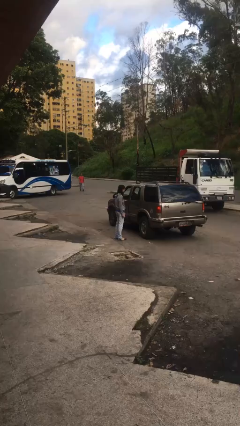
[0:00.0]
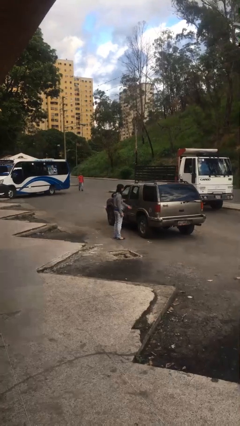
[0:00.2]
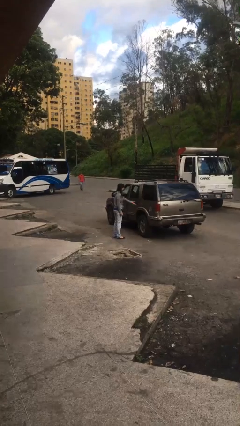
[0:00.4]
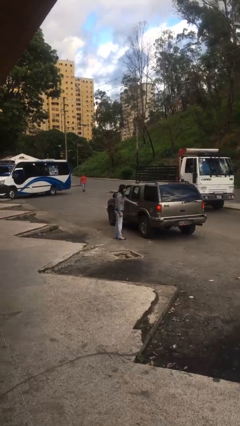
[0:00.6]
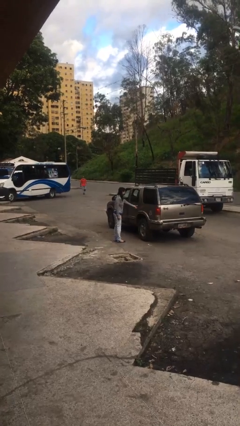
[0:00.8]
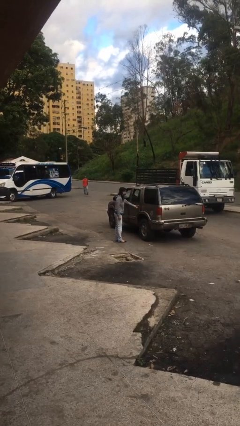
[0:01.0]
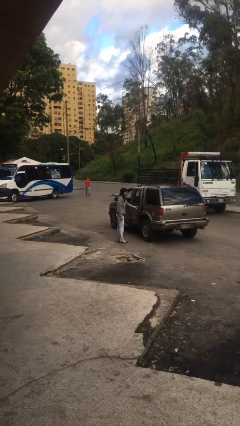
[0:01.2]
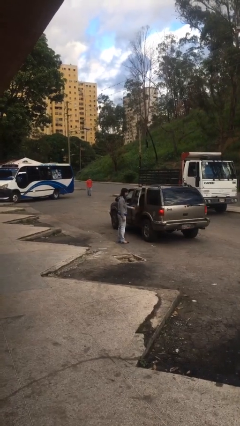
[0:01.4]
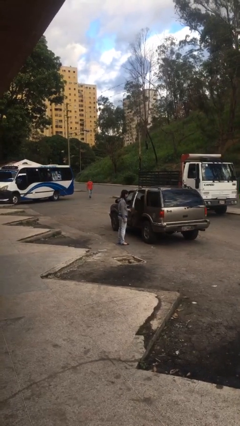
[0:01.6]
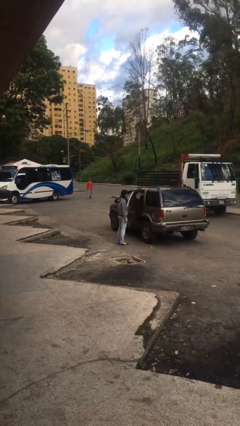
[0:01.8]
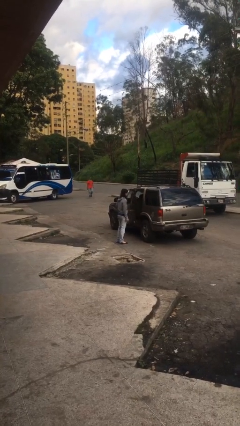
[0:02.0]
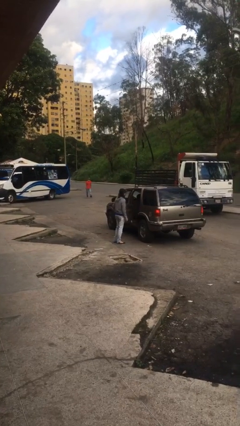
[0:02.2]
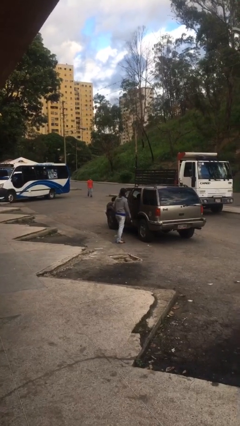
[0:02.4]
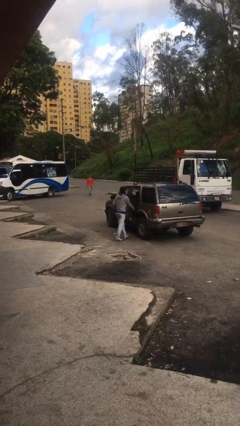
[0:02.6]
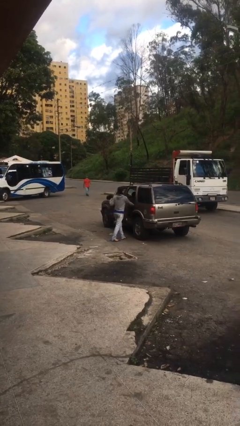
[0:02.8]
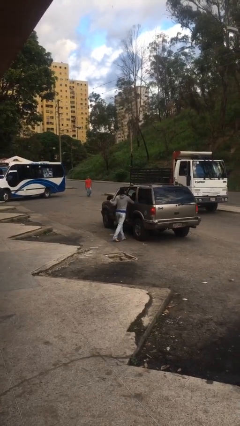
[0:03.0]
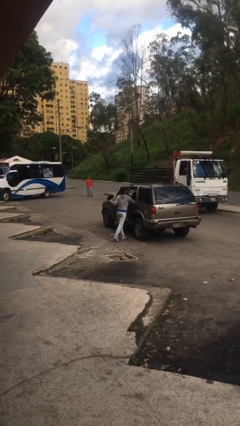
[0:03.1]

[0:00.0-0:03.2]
person opens car door

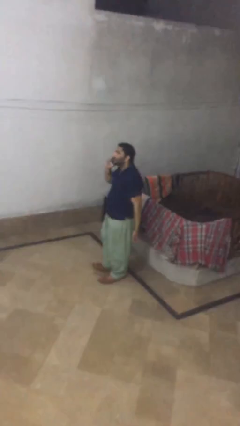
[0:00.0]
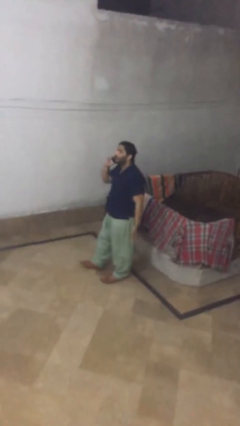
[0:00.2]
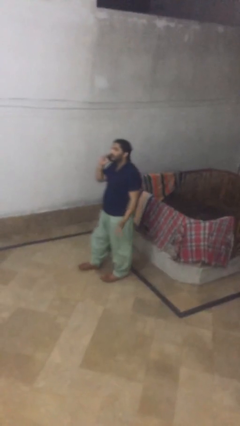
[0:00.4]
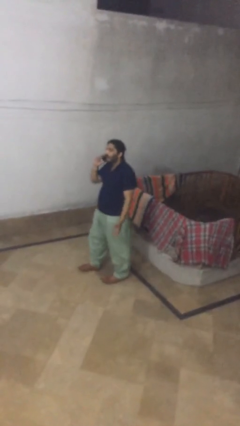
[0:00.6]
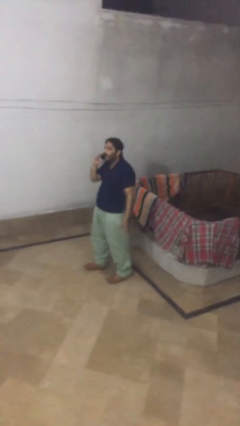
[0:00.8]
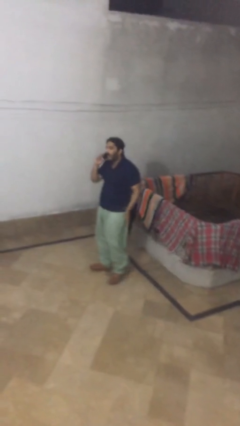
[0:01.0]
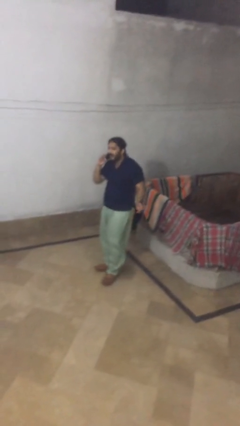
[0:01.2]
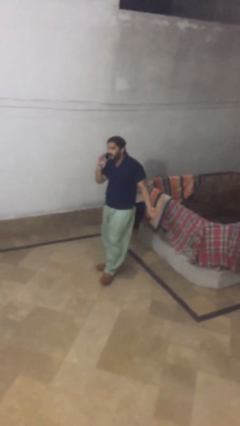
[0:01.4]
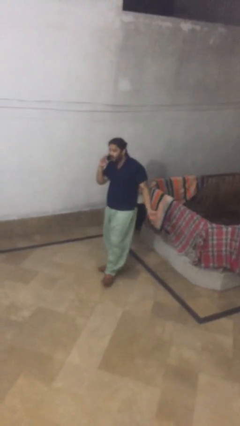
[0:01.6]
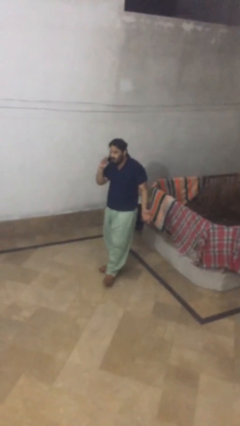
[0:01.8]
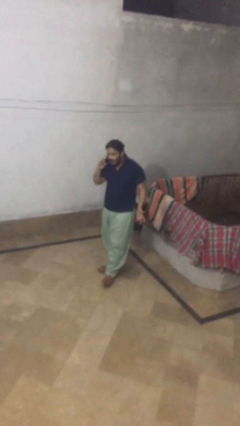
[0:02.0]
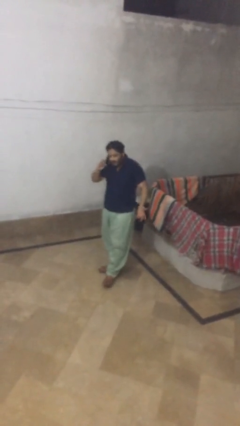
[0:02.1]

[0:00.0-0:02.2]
person talks on phone

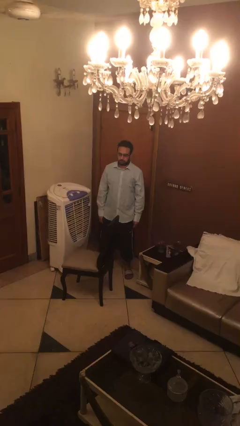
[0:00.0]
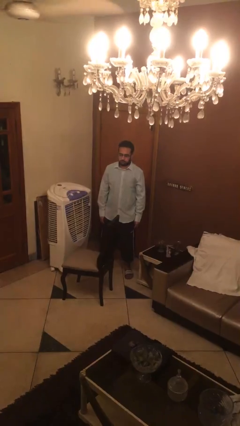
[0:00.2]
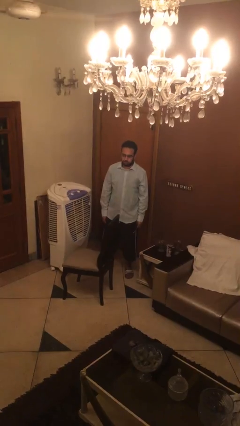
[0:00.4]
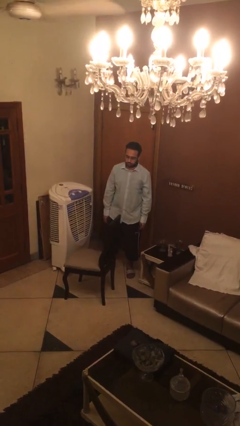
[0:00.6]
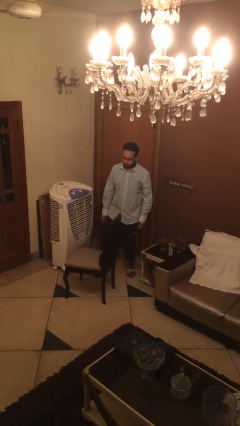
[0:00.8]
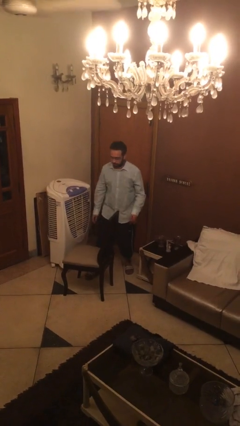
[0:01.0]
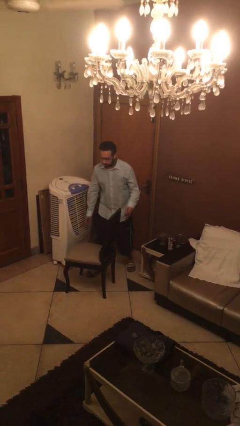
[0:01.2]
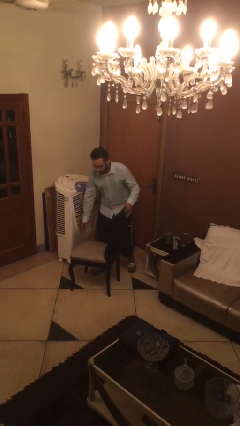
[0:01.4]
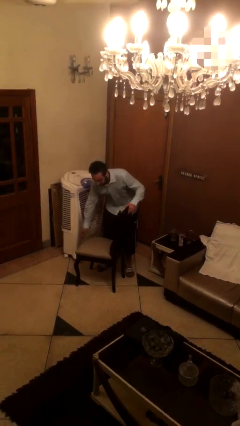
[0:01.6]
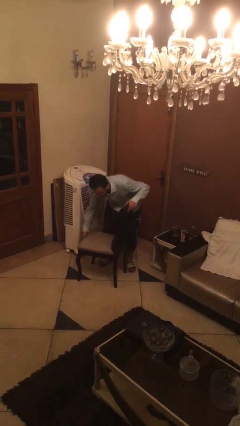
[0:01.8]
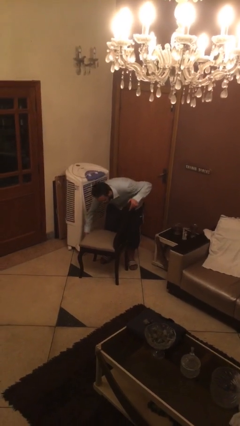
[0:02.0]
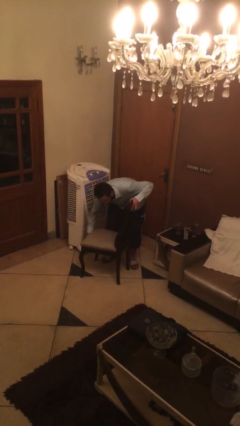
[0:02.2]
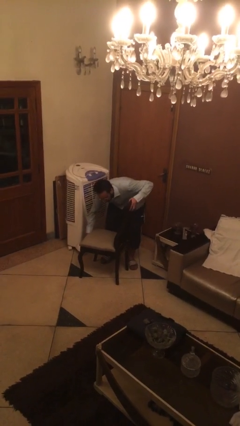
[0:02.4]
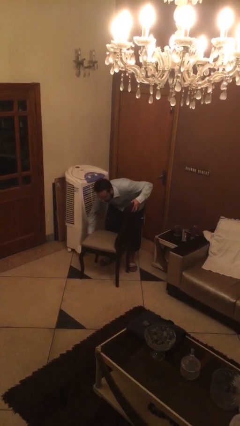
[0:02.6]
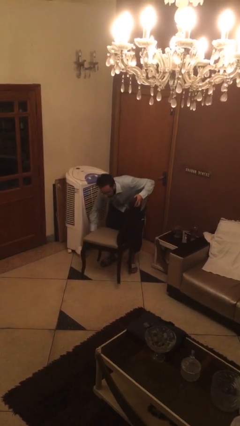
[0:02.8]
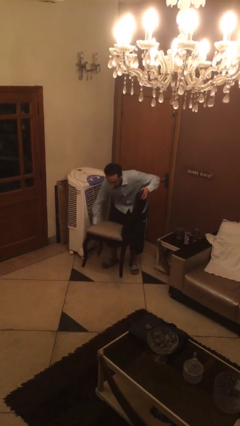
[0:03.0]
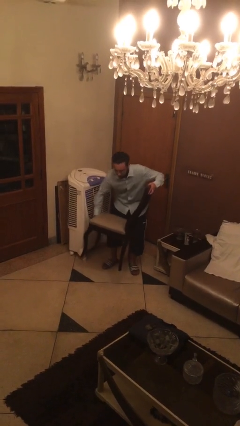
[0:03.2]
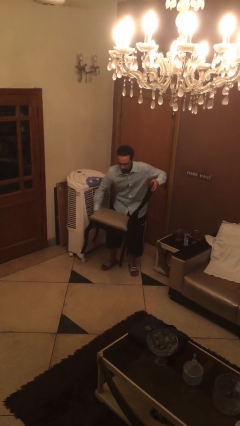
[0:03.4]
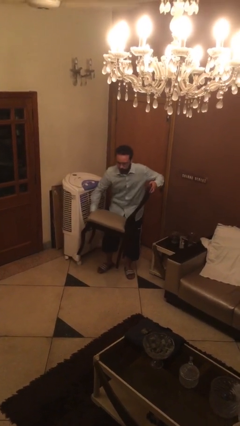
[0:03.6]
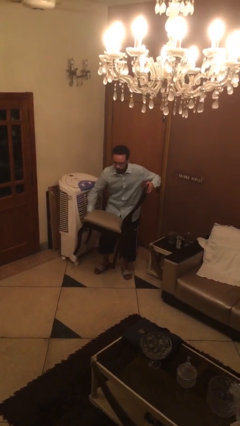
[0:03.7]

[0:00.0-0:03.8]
person picks up object from floor

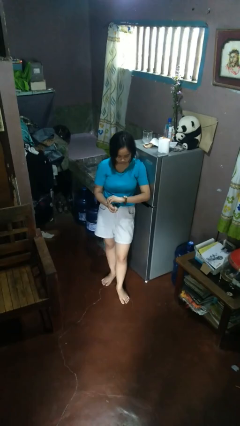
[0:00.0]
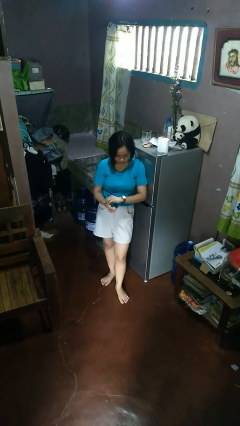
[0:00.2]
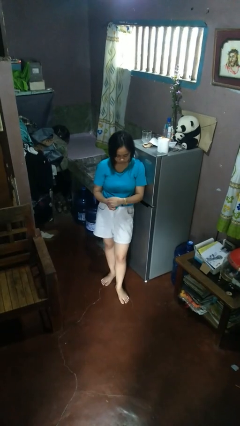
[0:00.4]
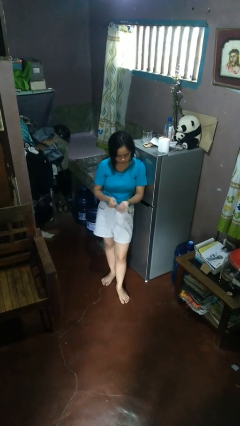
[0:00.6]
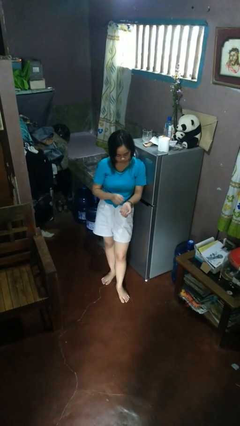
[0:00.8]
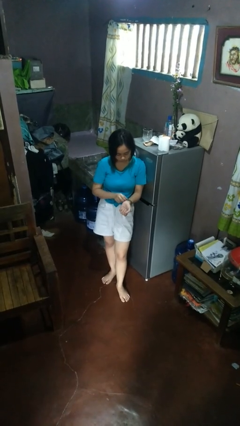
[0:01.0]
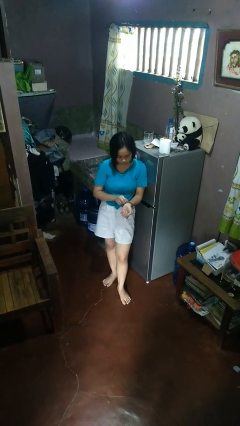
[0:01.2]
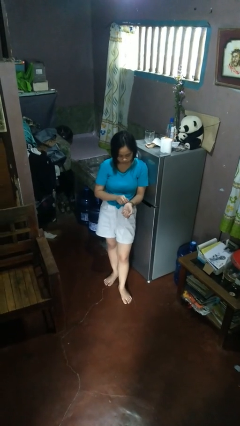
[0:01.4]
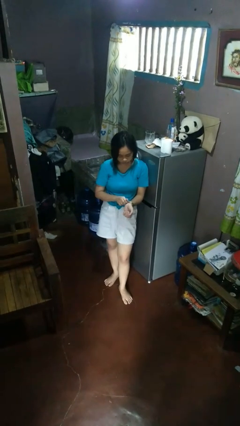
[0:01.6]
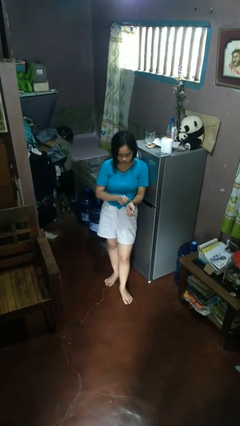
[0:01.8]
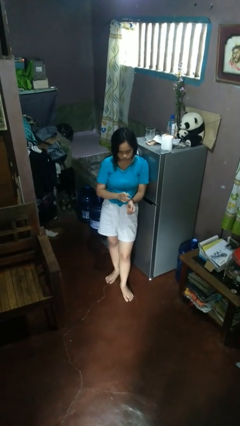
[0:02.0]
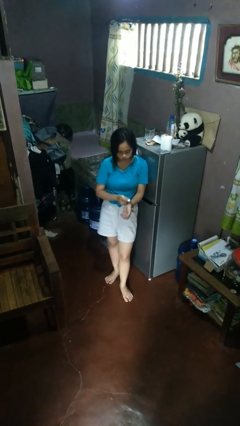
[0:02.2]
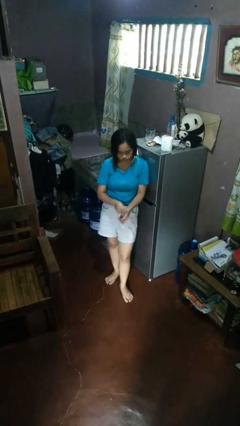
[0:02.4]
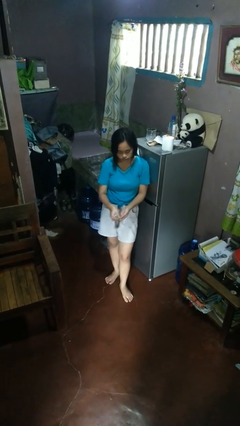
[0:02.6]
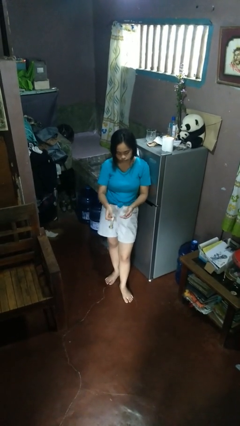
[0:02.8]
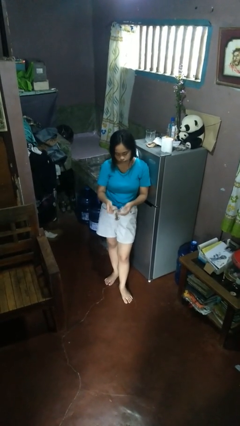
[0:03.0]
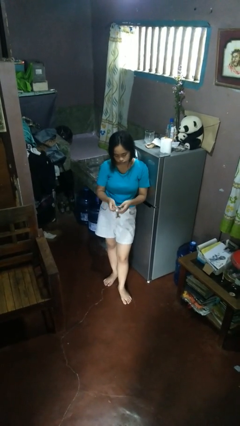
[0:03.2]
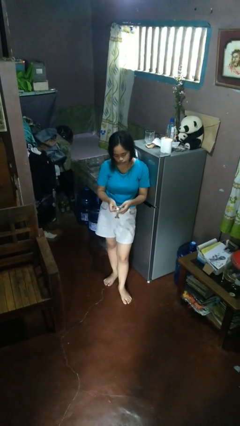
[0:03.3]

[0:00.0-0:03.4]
person takes off wristwatch

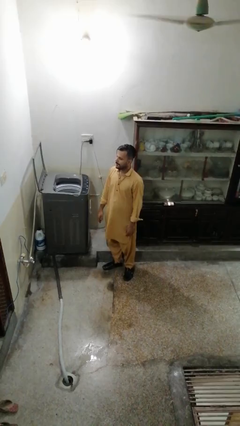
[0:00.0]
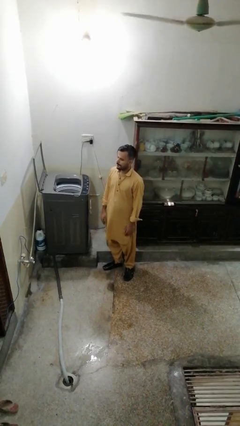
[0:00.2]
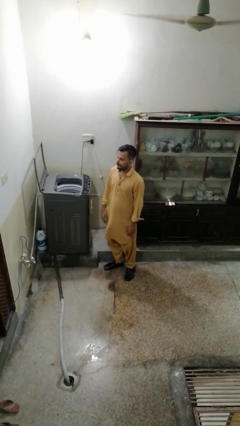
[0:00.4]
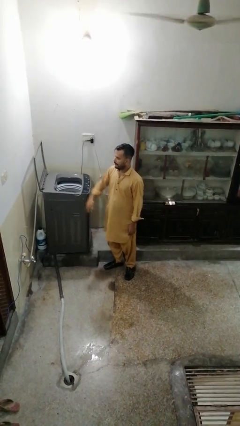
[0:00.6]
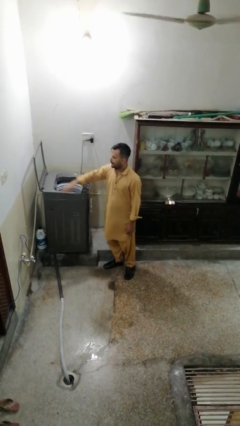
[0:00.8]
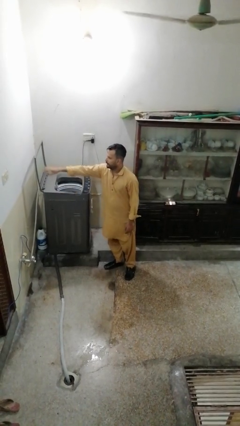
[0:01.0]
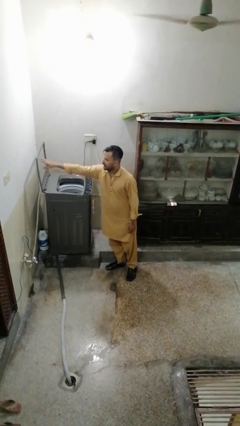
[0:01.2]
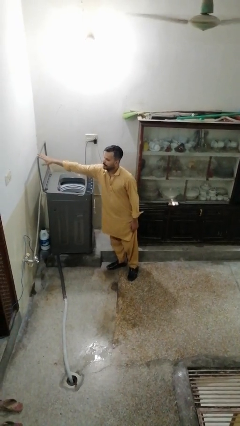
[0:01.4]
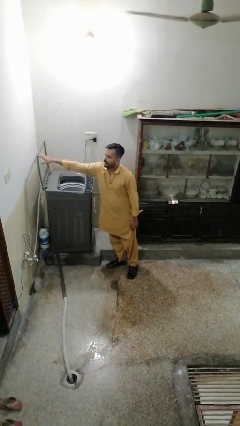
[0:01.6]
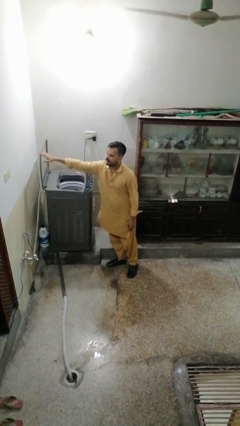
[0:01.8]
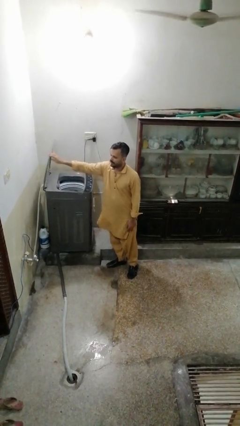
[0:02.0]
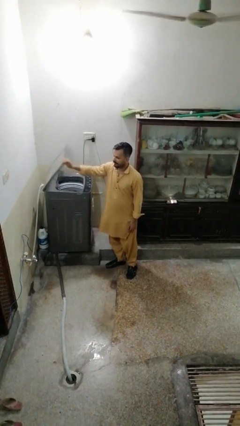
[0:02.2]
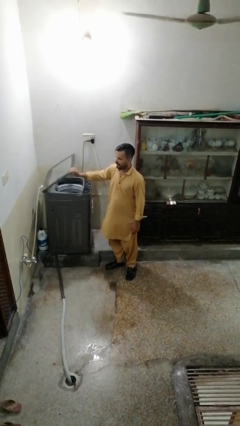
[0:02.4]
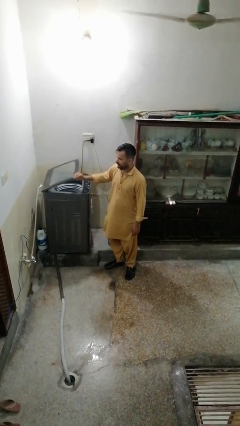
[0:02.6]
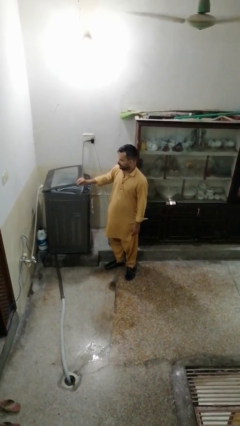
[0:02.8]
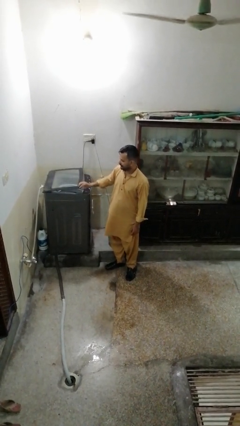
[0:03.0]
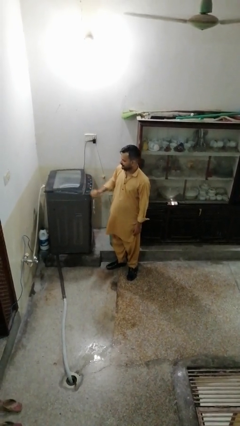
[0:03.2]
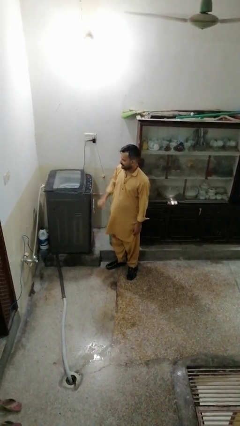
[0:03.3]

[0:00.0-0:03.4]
person closes clothes washer

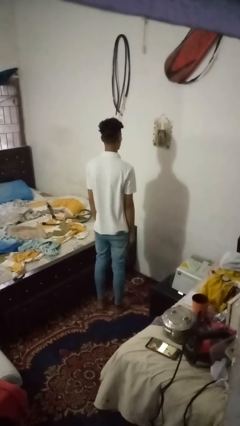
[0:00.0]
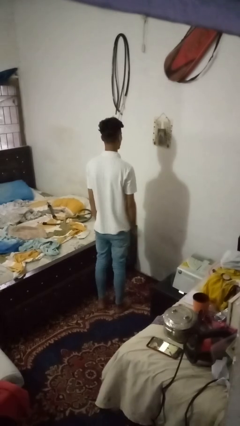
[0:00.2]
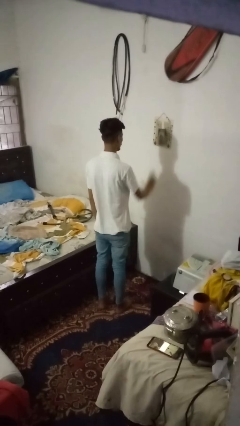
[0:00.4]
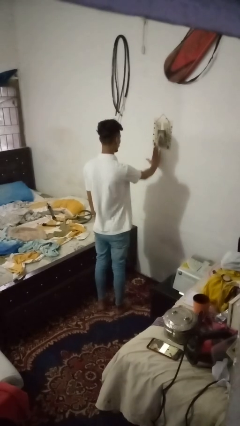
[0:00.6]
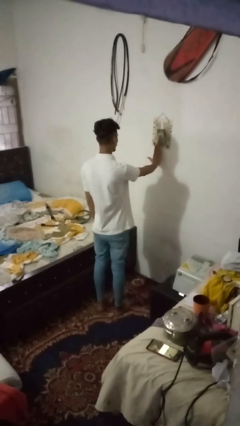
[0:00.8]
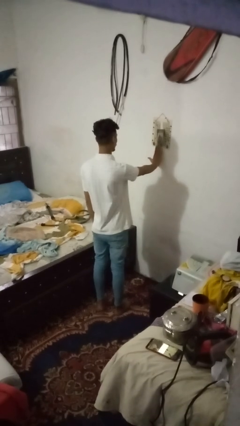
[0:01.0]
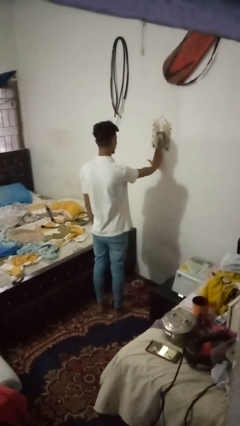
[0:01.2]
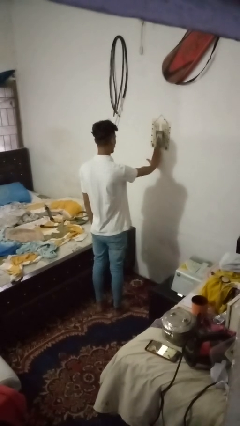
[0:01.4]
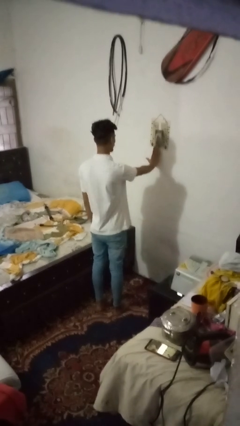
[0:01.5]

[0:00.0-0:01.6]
person gestures stop
